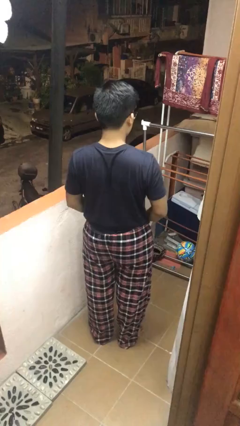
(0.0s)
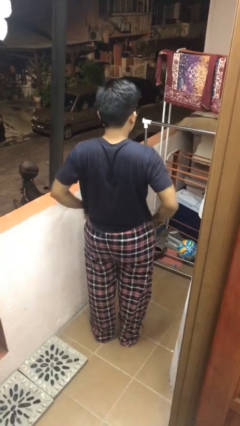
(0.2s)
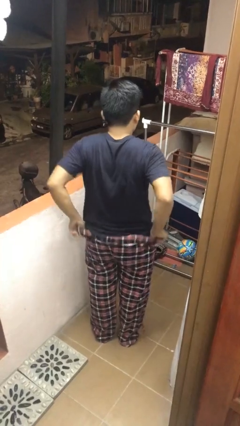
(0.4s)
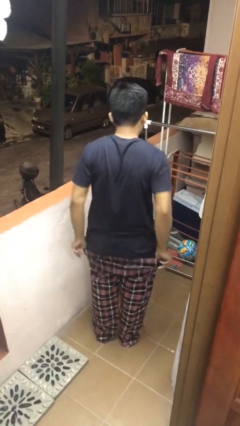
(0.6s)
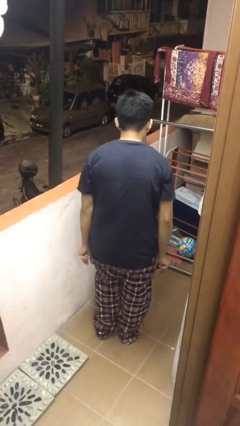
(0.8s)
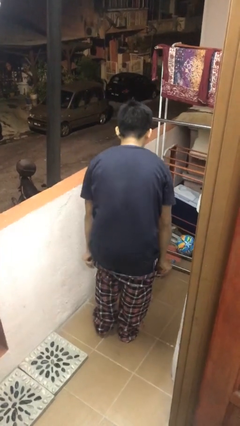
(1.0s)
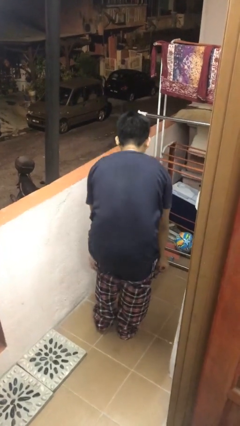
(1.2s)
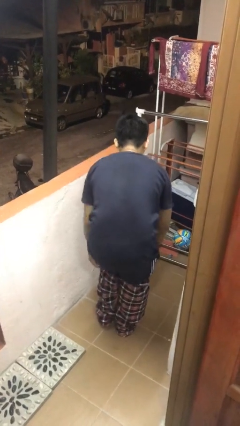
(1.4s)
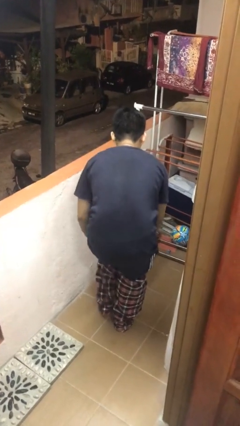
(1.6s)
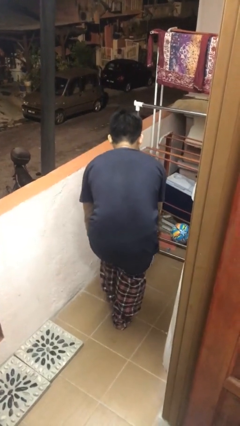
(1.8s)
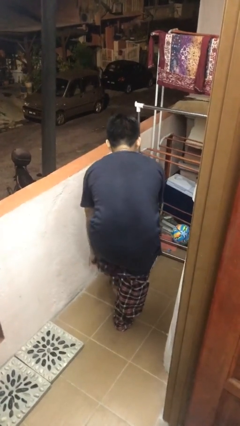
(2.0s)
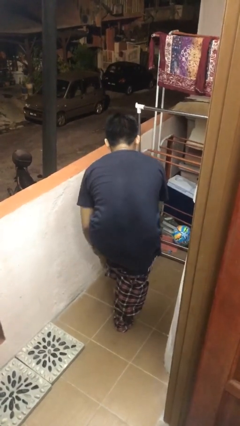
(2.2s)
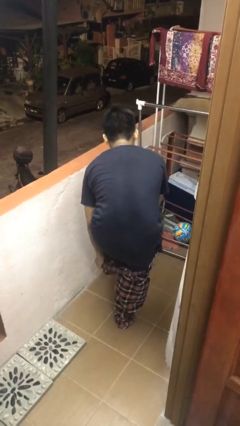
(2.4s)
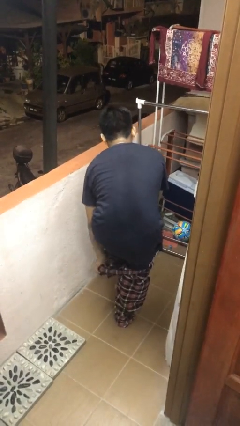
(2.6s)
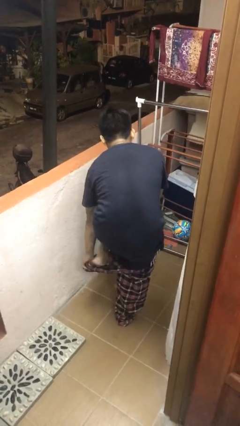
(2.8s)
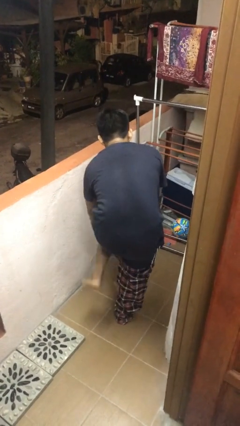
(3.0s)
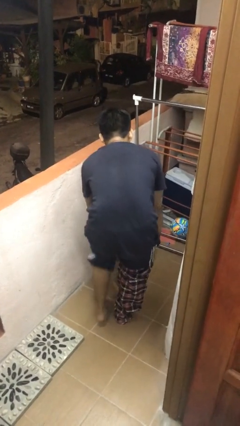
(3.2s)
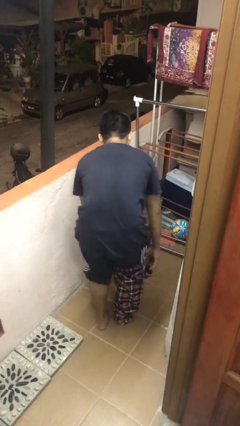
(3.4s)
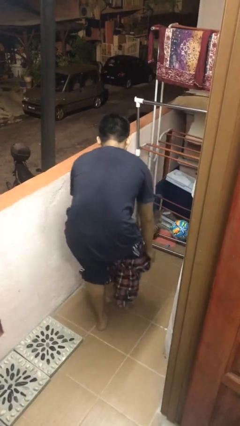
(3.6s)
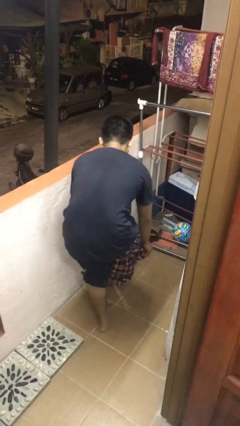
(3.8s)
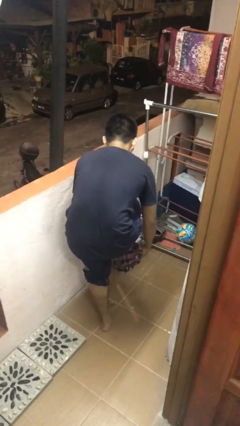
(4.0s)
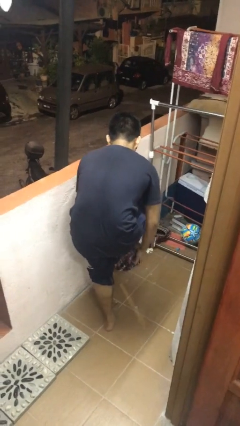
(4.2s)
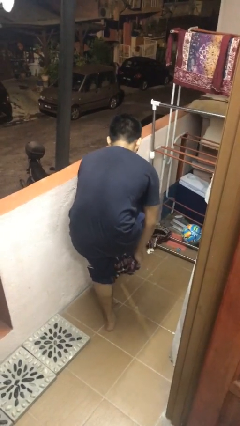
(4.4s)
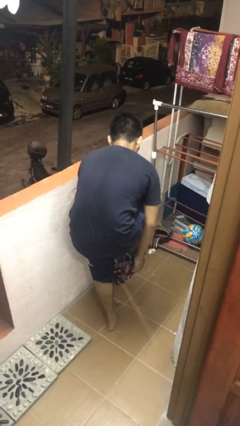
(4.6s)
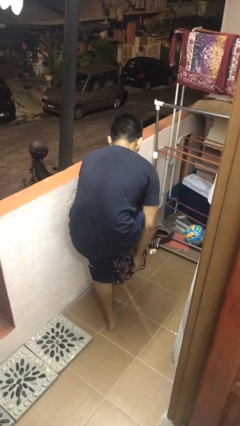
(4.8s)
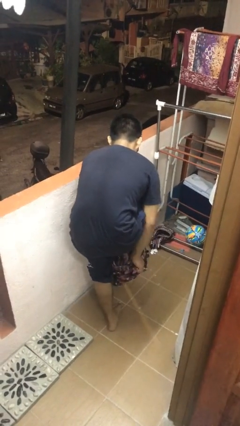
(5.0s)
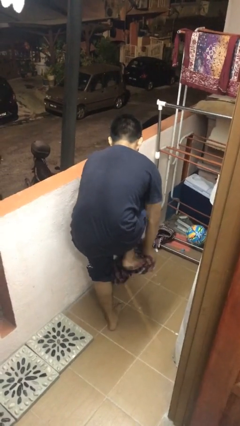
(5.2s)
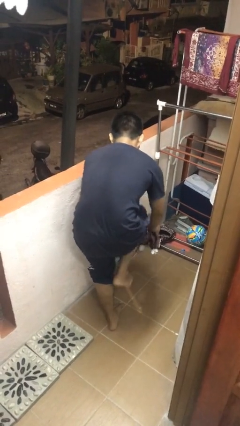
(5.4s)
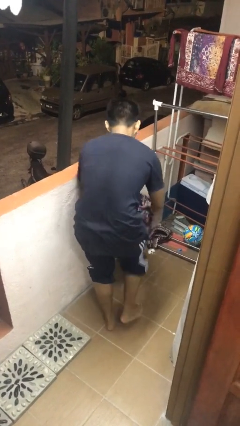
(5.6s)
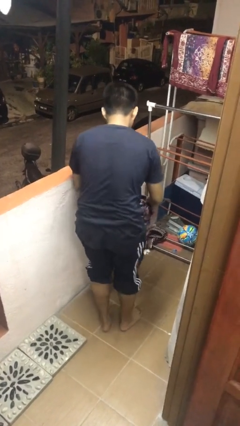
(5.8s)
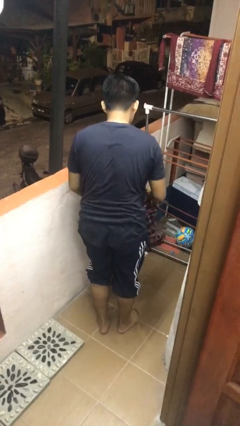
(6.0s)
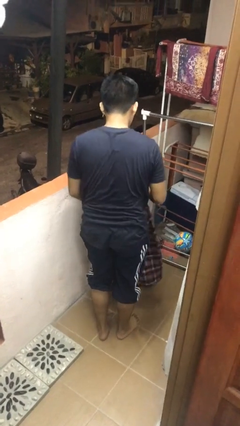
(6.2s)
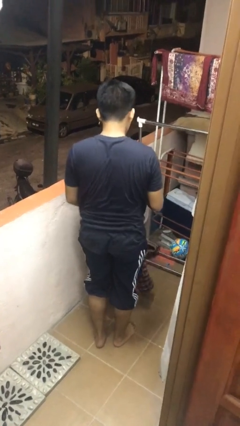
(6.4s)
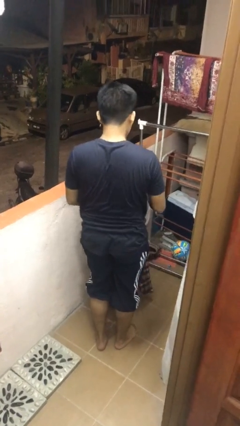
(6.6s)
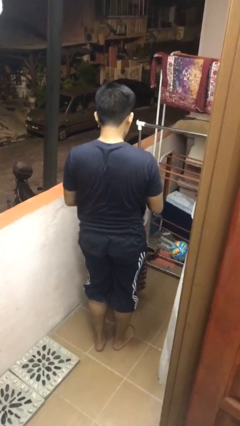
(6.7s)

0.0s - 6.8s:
person takes off pants

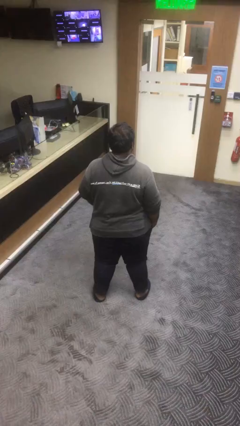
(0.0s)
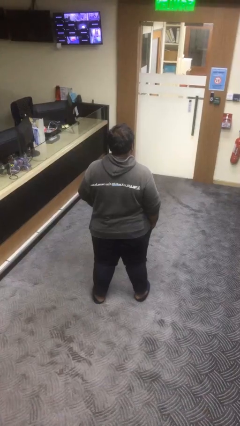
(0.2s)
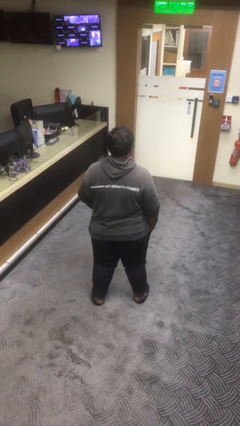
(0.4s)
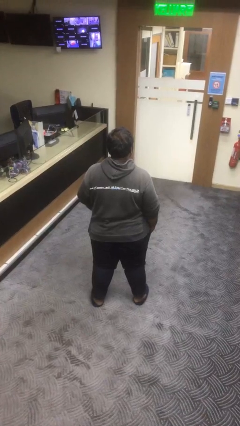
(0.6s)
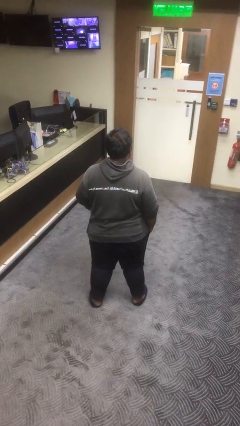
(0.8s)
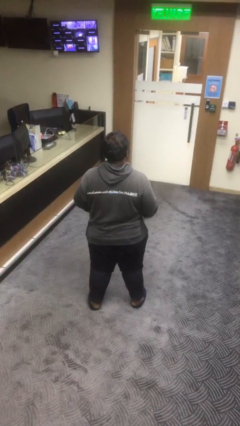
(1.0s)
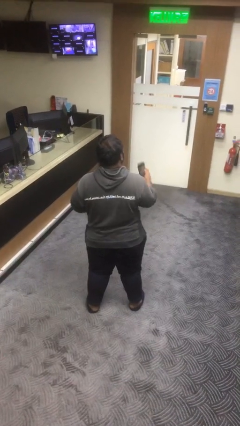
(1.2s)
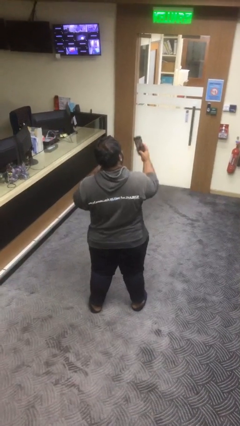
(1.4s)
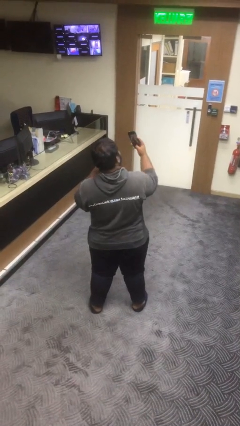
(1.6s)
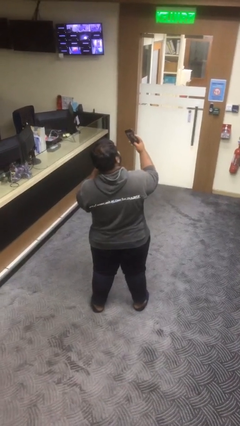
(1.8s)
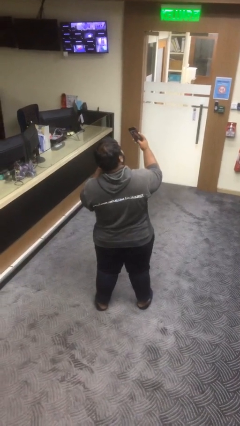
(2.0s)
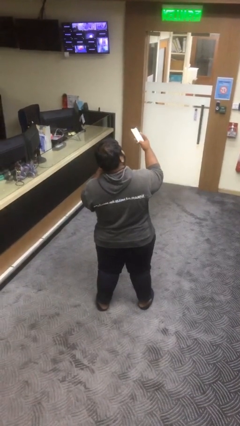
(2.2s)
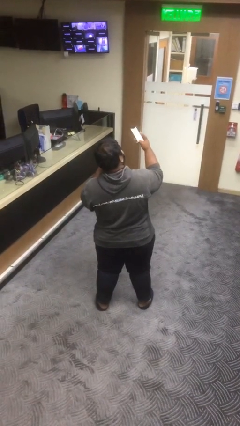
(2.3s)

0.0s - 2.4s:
person takes selfie

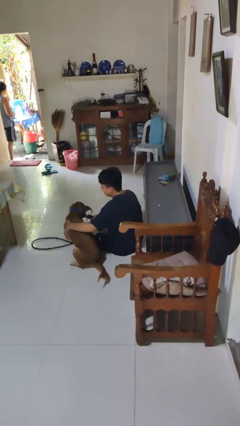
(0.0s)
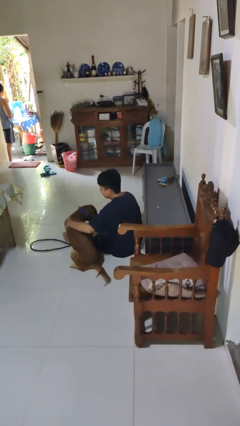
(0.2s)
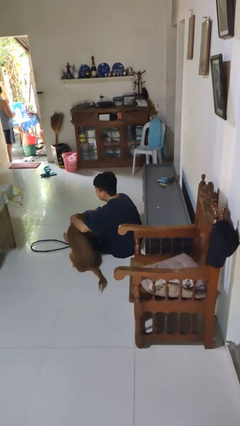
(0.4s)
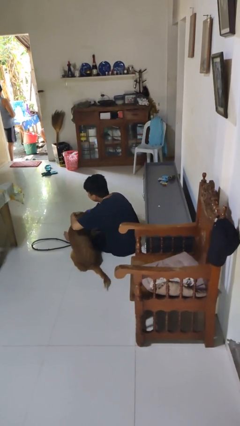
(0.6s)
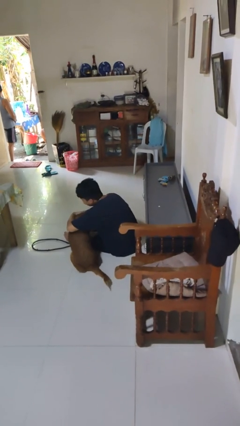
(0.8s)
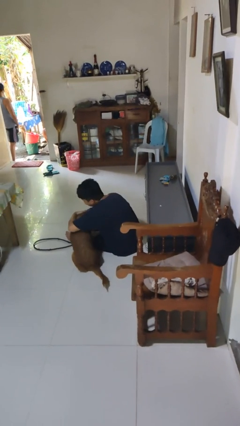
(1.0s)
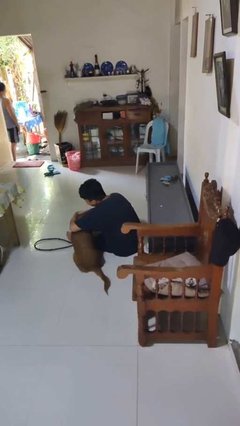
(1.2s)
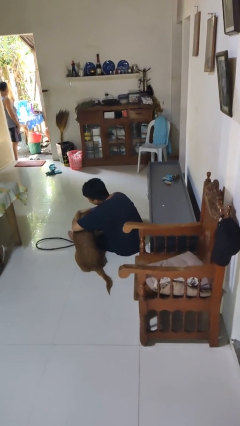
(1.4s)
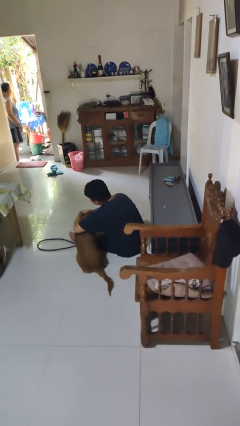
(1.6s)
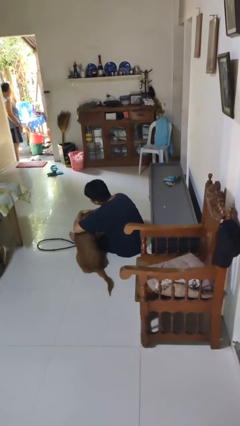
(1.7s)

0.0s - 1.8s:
person hugs dog

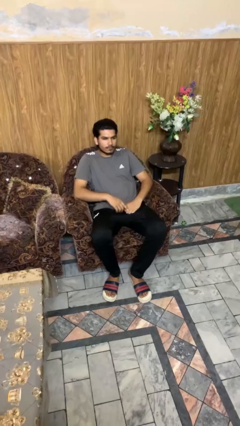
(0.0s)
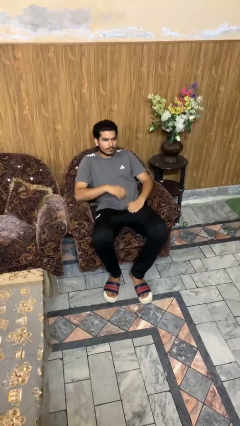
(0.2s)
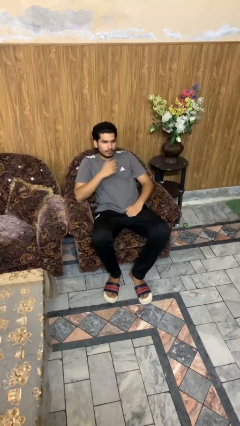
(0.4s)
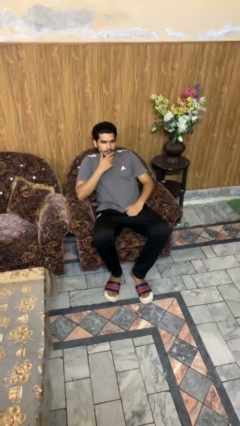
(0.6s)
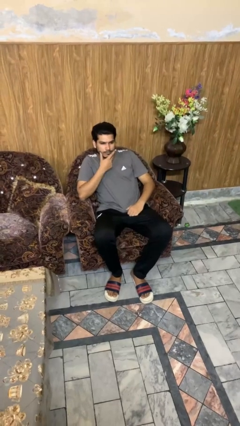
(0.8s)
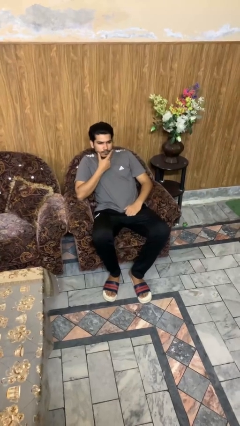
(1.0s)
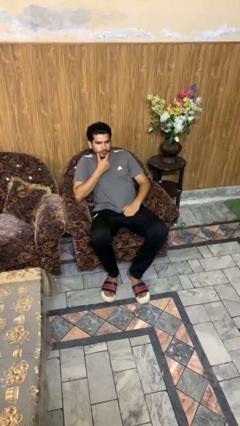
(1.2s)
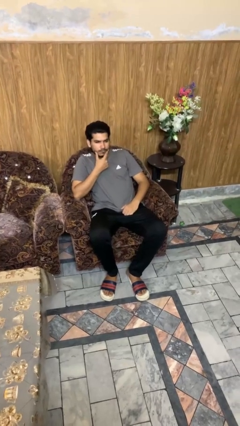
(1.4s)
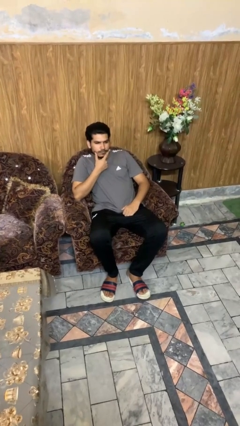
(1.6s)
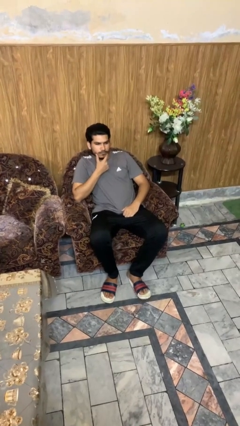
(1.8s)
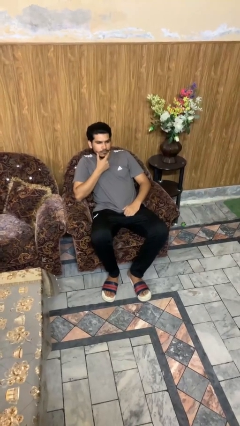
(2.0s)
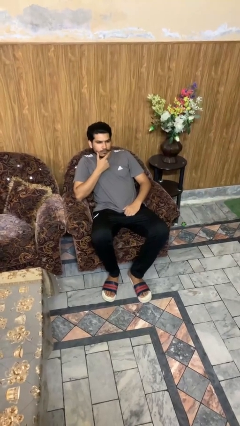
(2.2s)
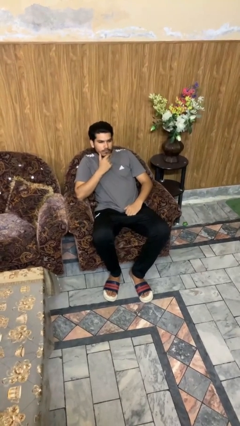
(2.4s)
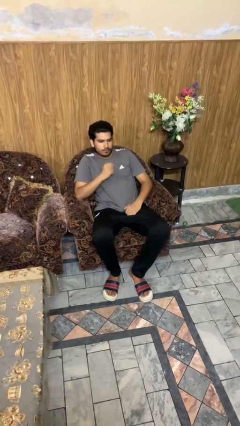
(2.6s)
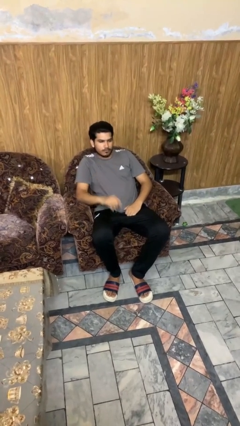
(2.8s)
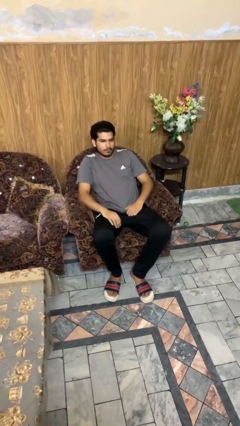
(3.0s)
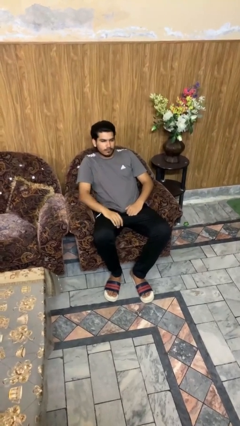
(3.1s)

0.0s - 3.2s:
person strokes chin

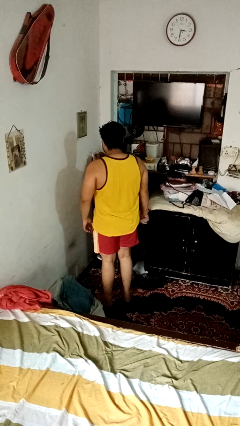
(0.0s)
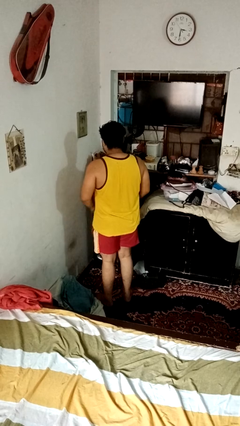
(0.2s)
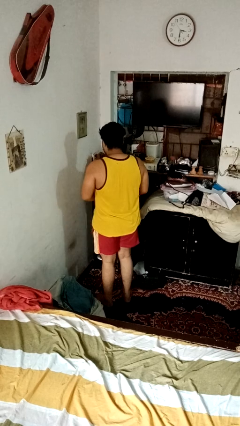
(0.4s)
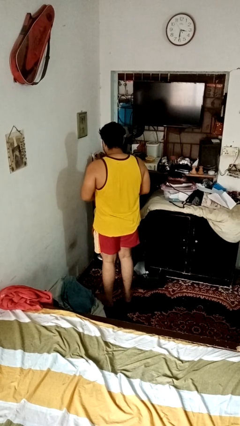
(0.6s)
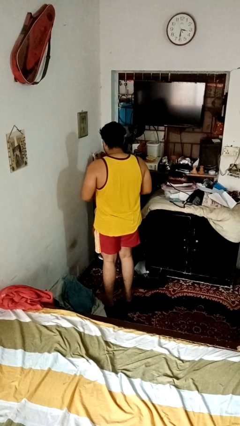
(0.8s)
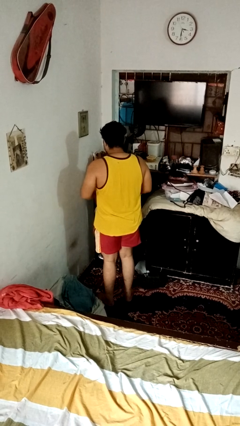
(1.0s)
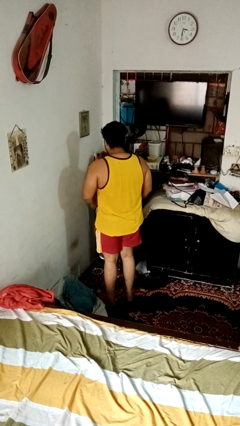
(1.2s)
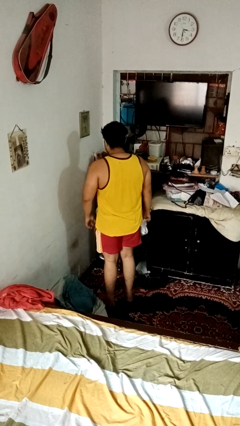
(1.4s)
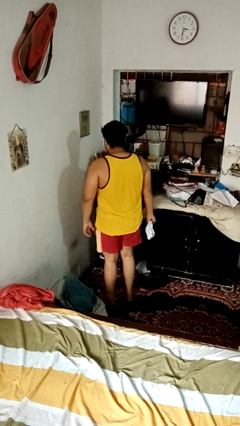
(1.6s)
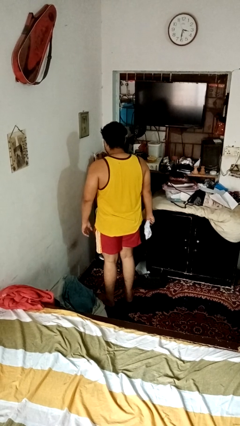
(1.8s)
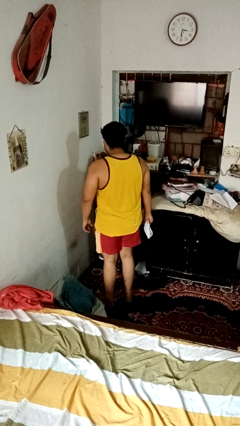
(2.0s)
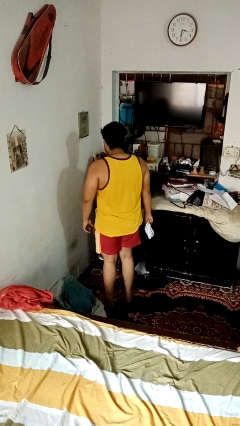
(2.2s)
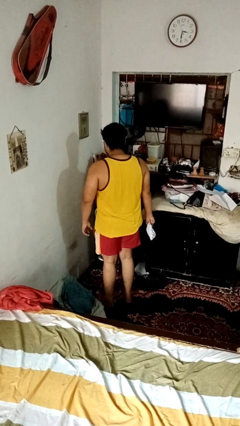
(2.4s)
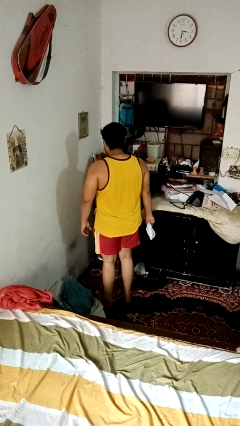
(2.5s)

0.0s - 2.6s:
person crumples paper

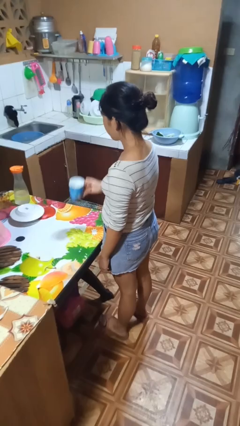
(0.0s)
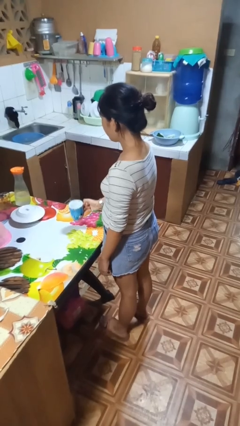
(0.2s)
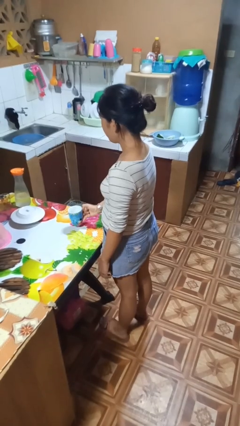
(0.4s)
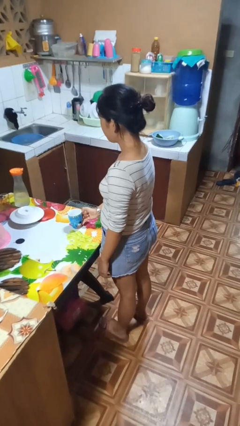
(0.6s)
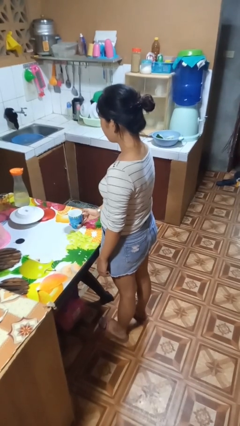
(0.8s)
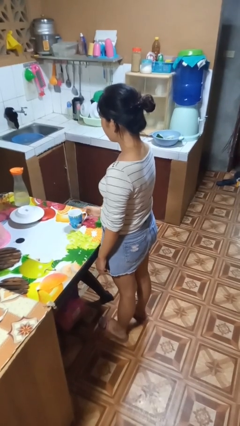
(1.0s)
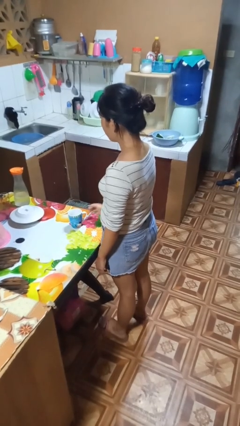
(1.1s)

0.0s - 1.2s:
person puts down object on table
